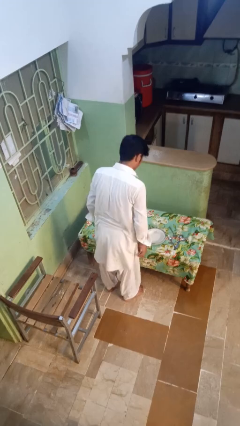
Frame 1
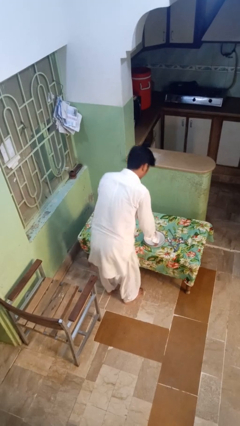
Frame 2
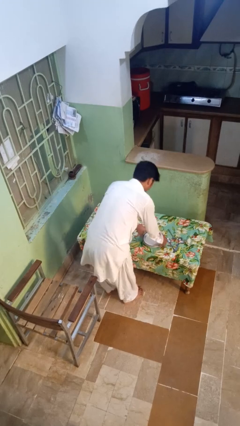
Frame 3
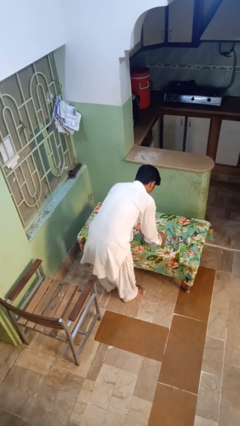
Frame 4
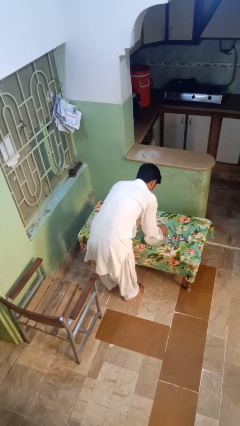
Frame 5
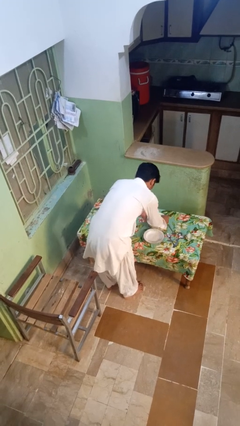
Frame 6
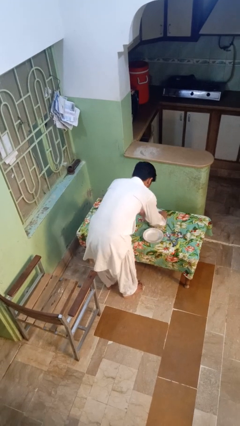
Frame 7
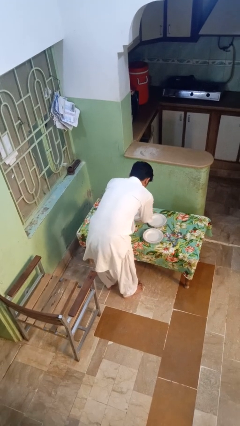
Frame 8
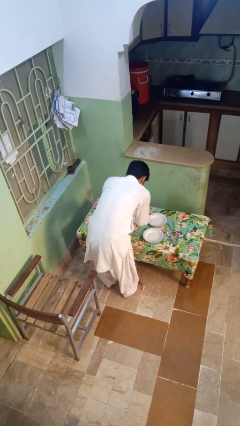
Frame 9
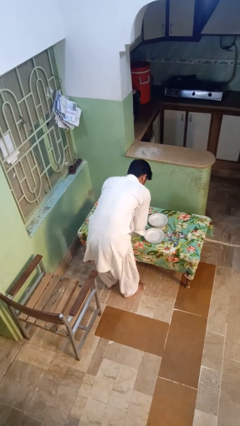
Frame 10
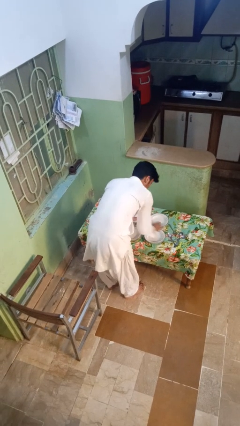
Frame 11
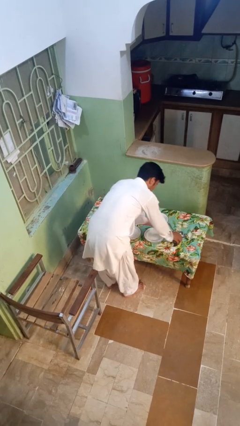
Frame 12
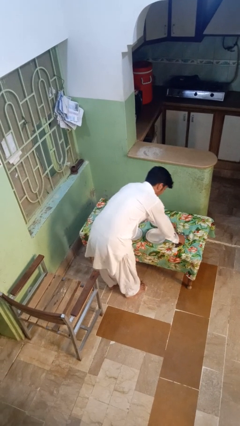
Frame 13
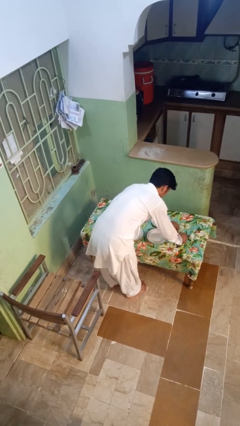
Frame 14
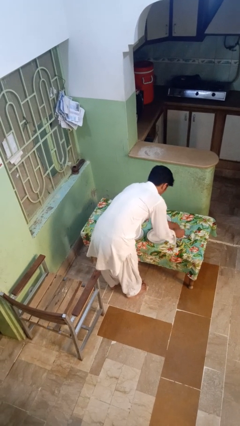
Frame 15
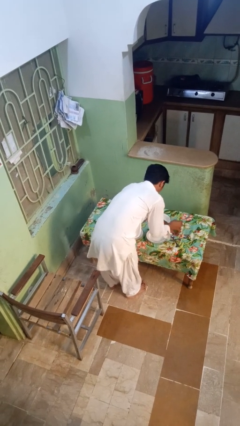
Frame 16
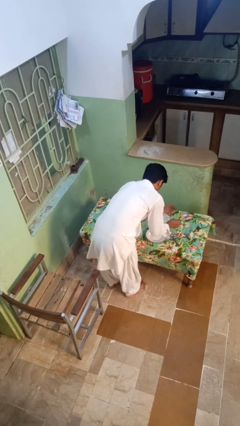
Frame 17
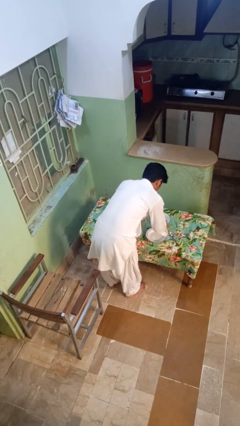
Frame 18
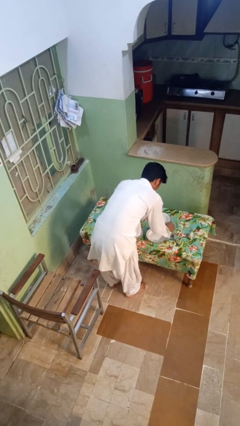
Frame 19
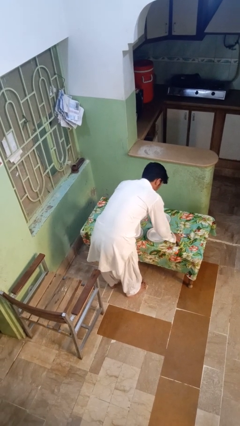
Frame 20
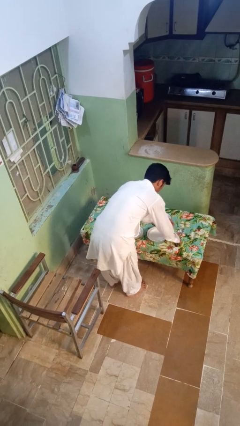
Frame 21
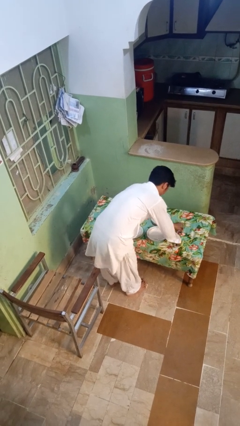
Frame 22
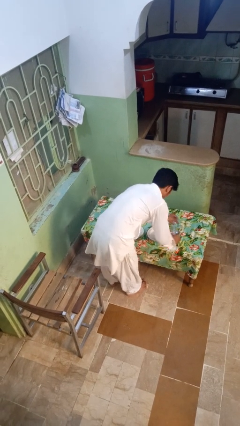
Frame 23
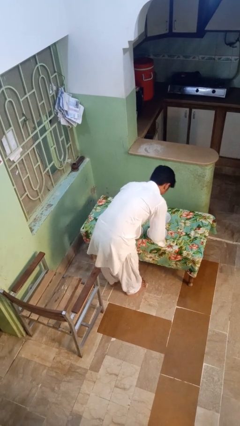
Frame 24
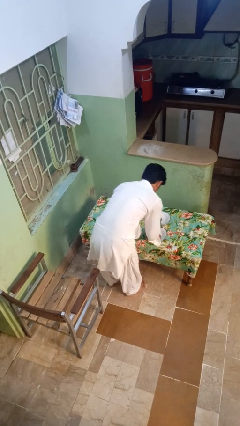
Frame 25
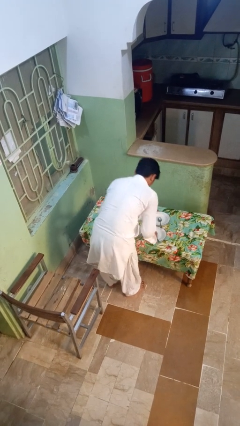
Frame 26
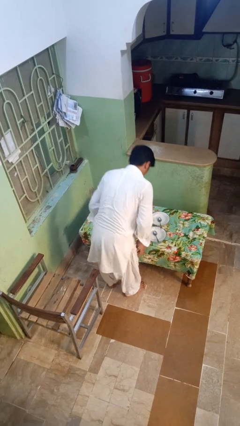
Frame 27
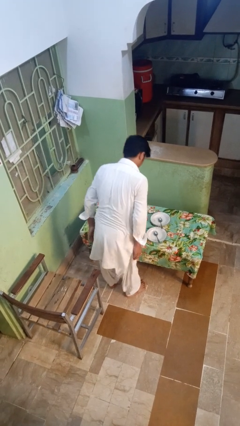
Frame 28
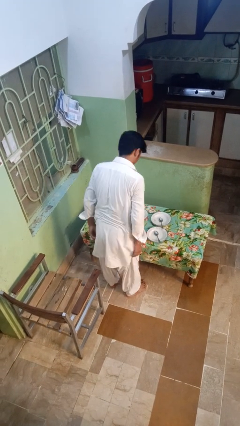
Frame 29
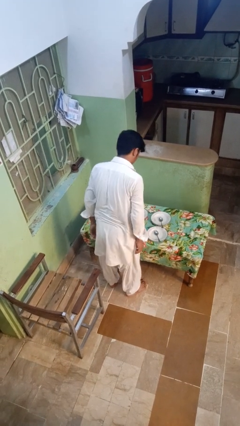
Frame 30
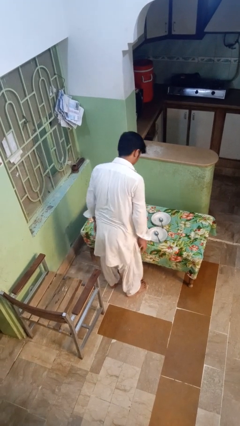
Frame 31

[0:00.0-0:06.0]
person sets table

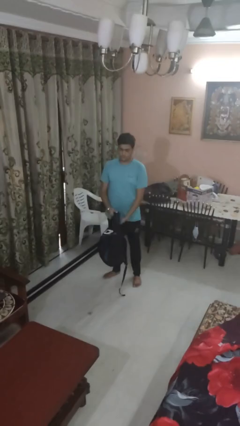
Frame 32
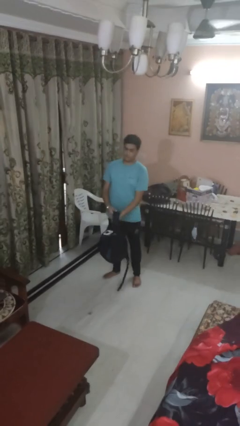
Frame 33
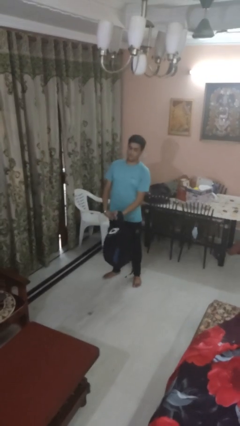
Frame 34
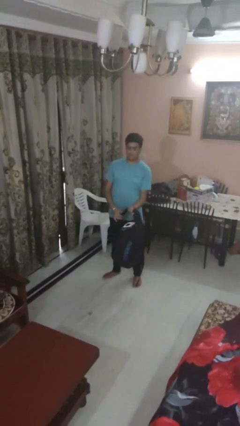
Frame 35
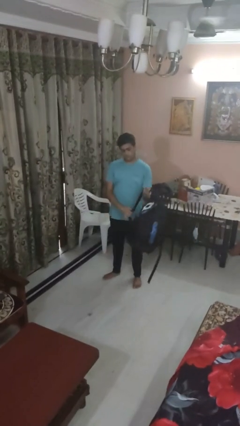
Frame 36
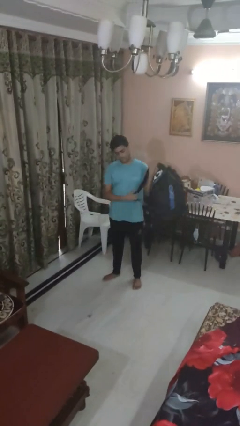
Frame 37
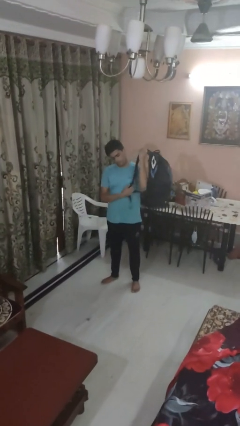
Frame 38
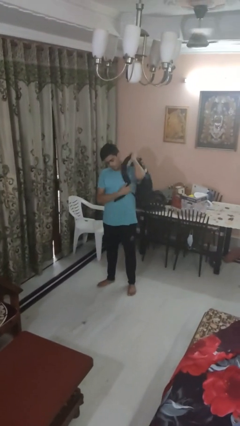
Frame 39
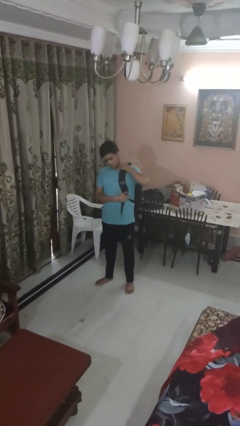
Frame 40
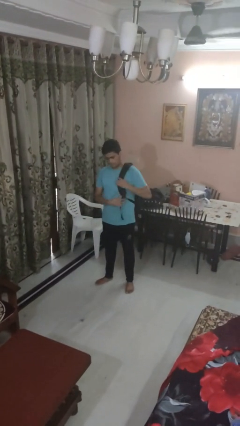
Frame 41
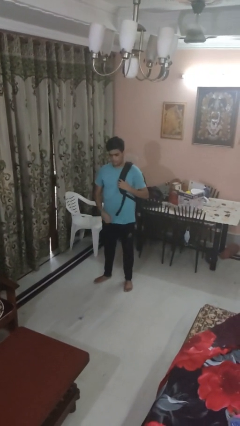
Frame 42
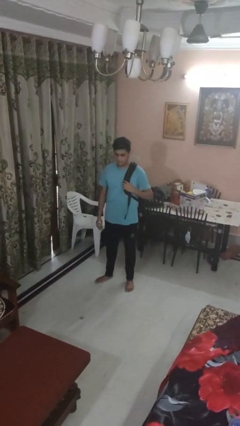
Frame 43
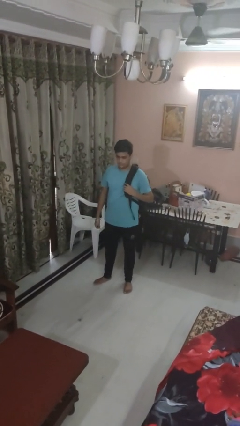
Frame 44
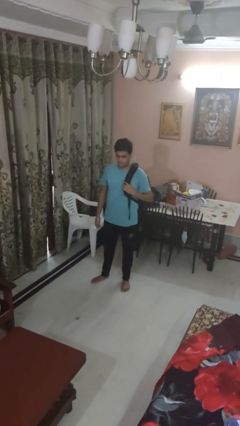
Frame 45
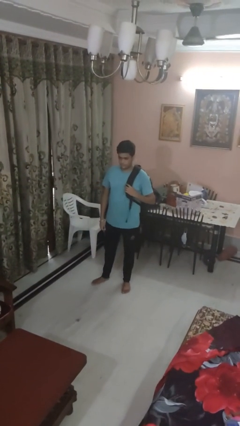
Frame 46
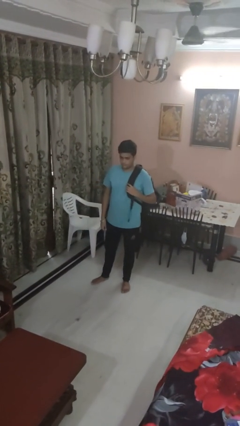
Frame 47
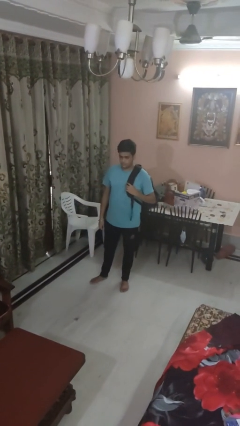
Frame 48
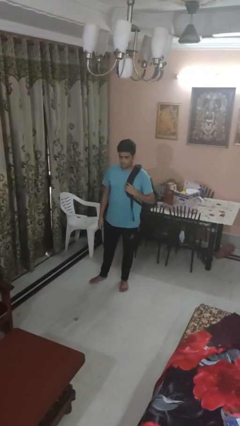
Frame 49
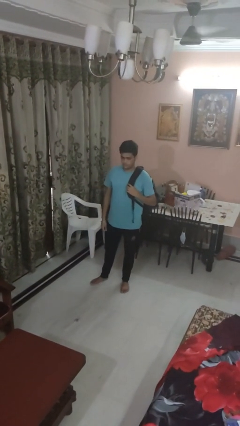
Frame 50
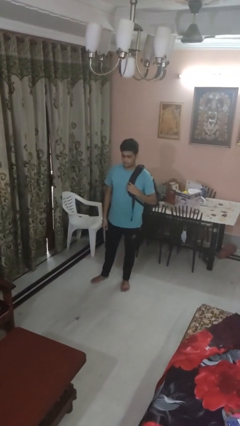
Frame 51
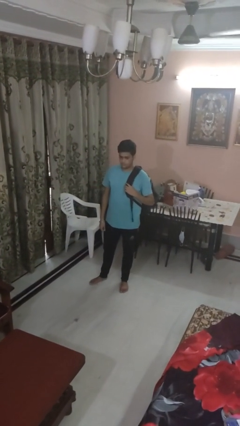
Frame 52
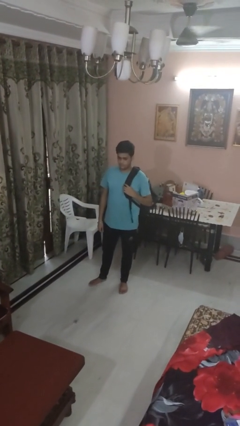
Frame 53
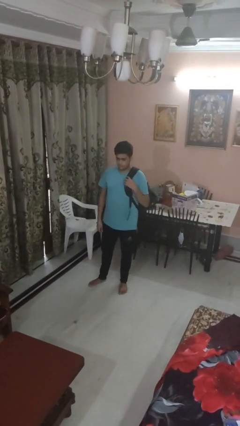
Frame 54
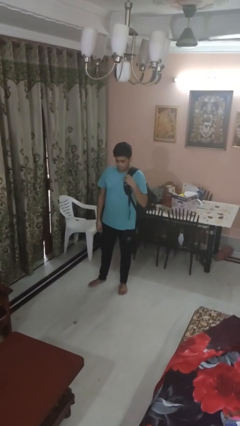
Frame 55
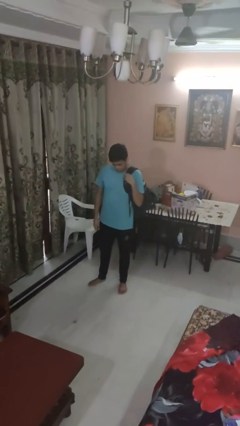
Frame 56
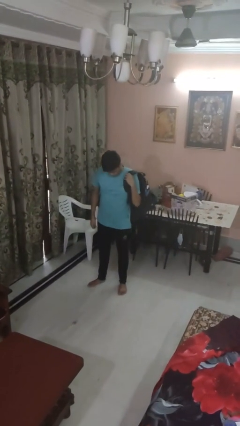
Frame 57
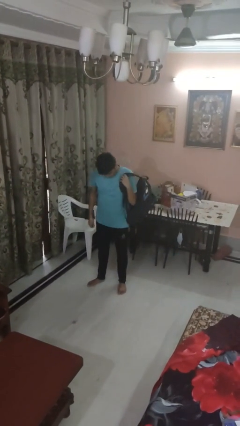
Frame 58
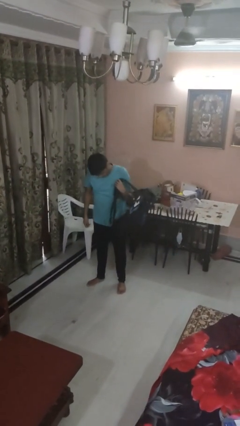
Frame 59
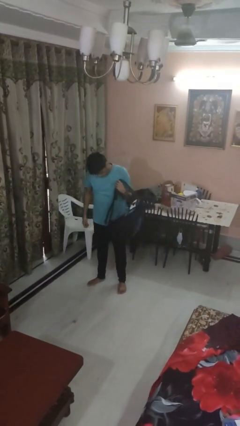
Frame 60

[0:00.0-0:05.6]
person puts on backpack

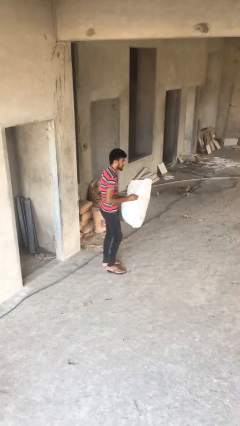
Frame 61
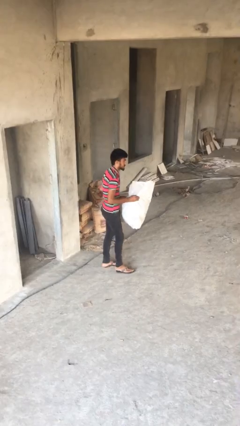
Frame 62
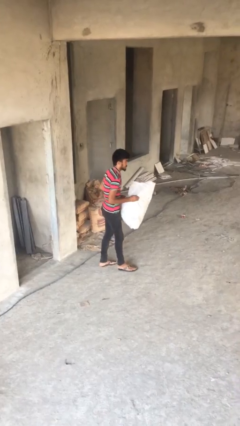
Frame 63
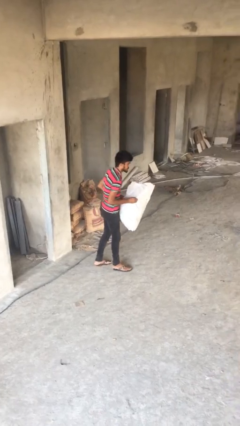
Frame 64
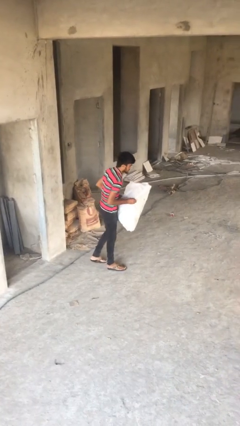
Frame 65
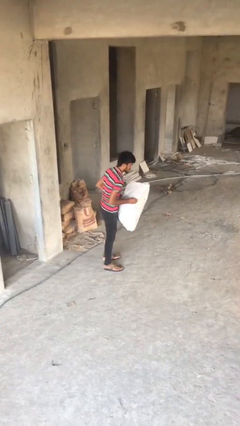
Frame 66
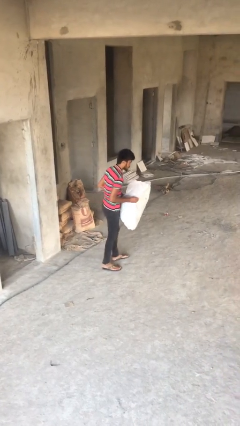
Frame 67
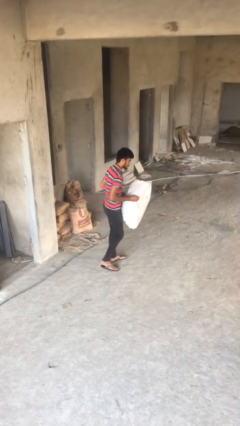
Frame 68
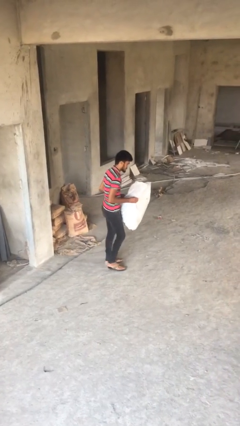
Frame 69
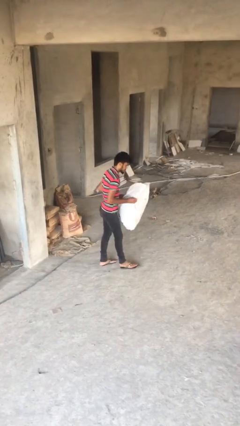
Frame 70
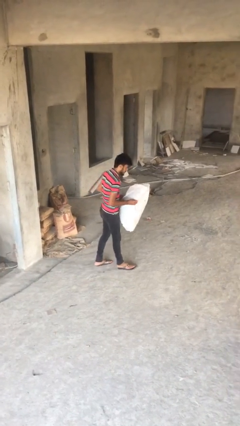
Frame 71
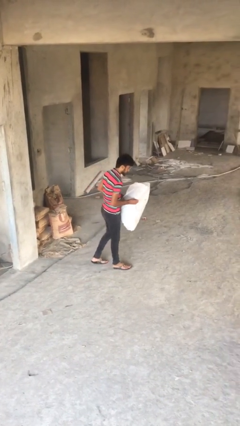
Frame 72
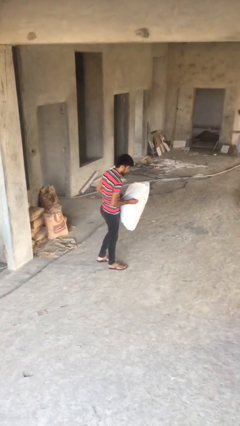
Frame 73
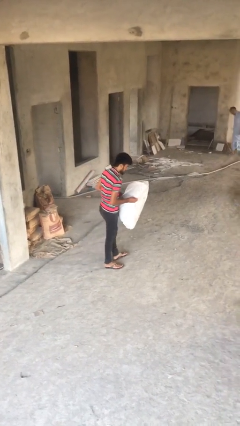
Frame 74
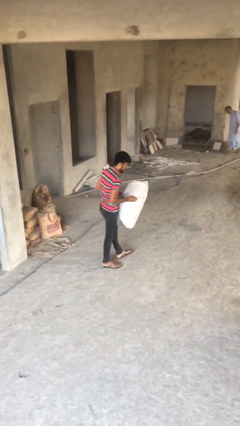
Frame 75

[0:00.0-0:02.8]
person carries heavy object

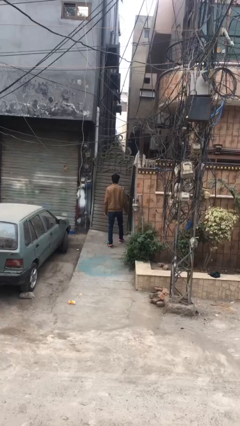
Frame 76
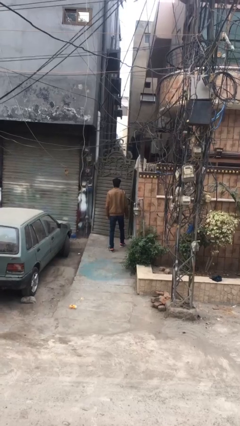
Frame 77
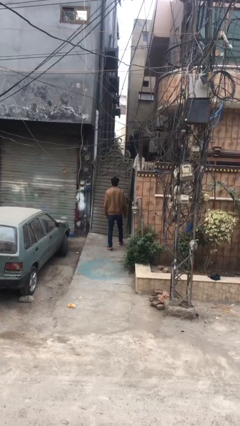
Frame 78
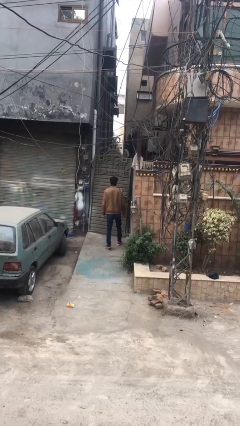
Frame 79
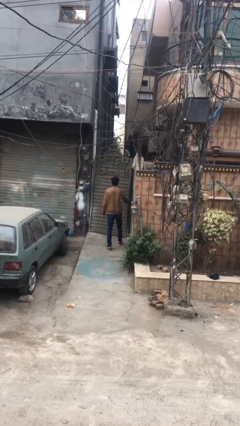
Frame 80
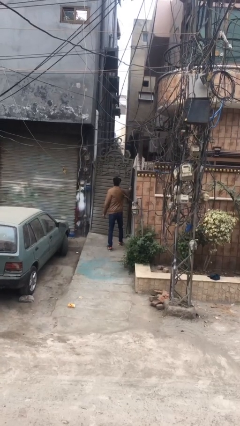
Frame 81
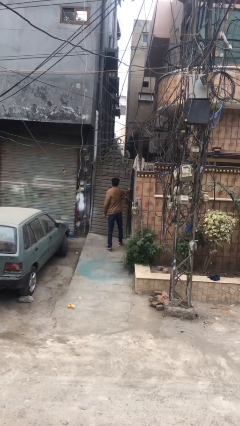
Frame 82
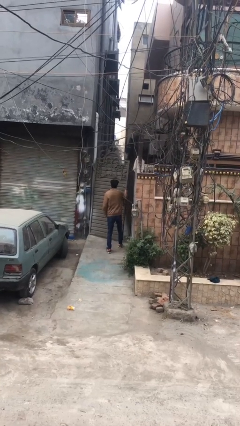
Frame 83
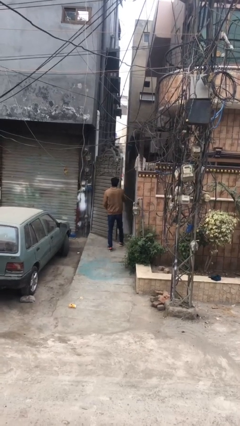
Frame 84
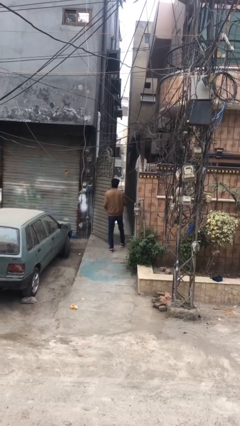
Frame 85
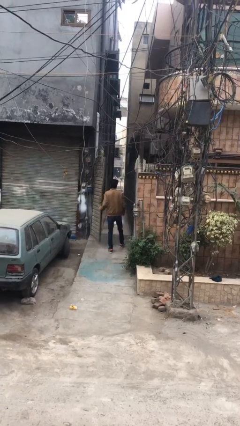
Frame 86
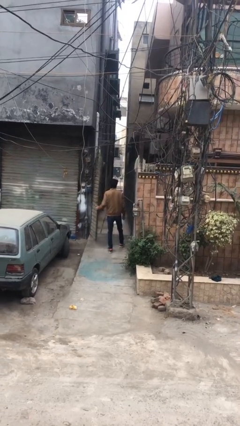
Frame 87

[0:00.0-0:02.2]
person opens facility door

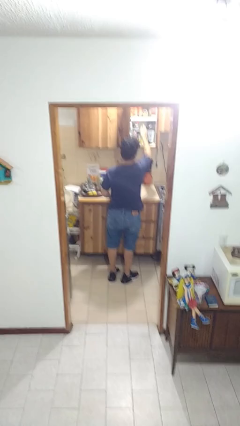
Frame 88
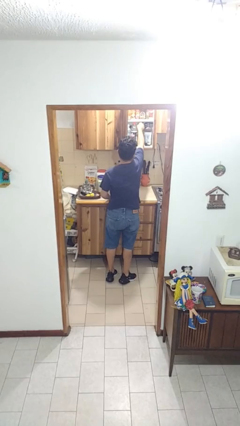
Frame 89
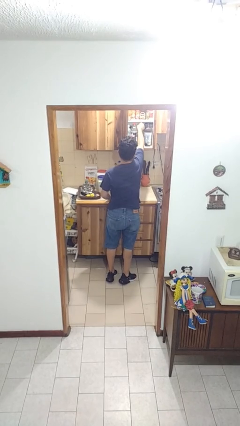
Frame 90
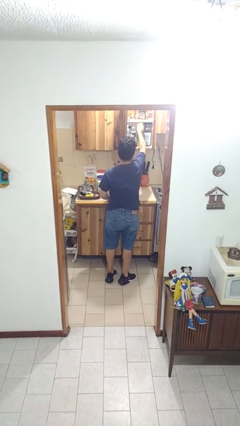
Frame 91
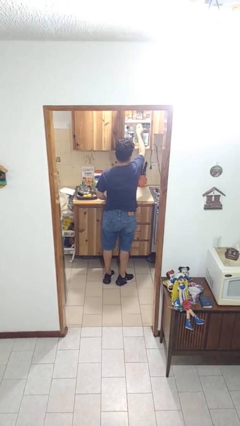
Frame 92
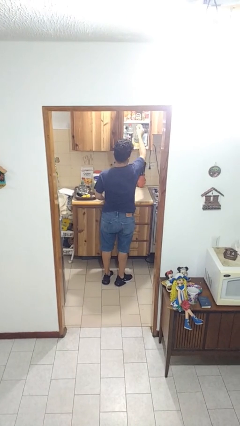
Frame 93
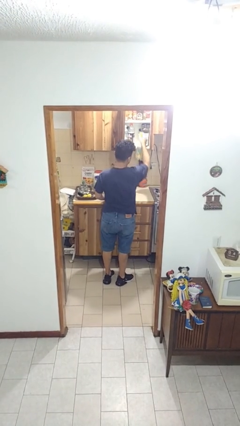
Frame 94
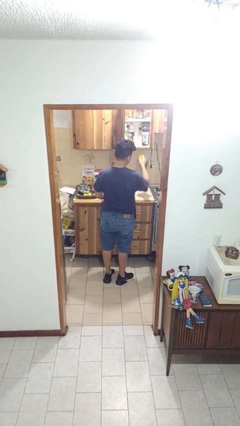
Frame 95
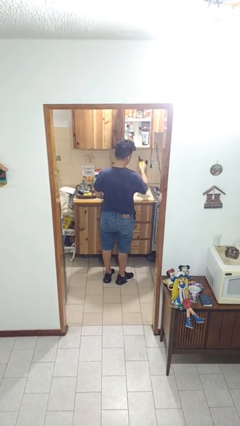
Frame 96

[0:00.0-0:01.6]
person takes object from cabinet
